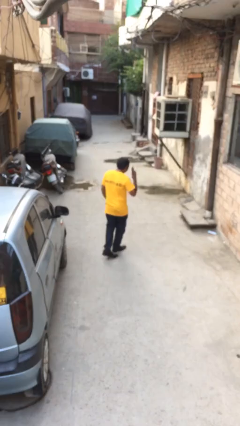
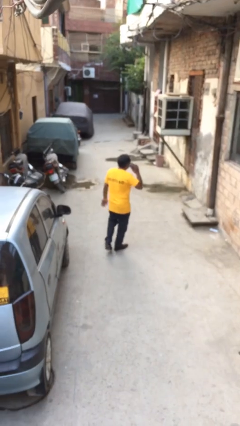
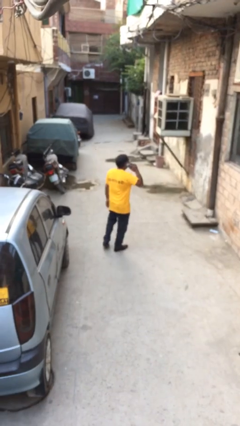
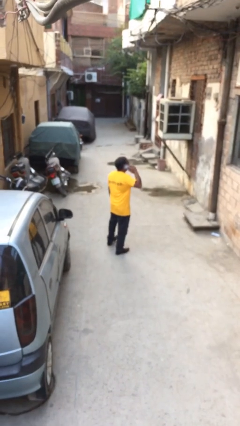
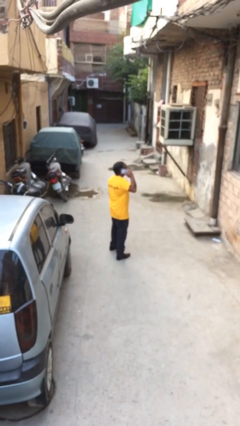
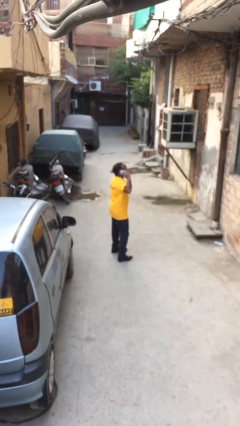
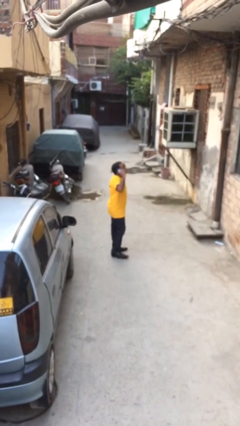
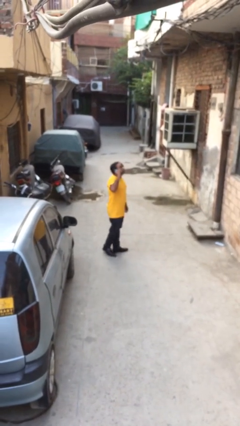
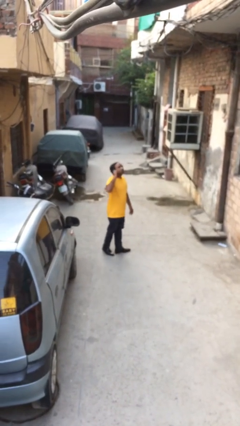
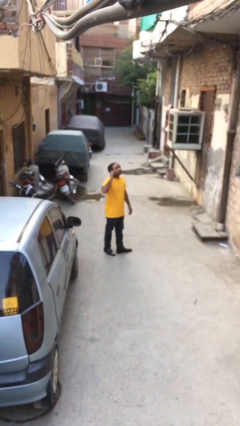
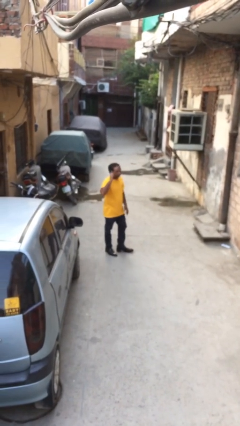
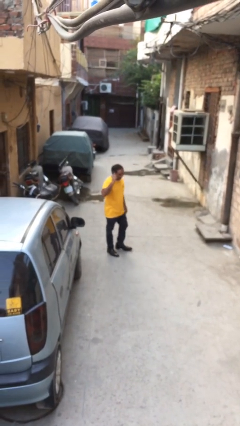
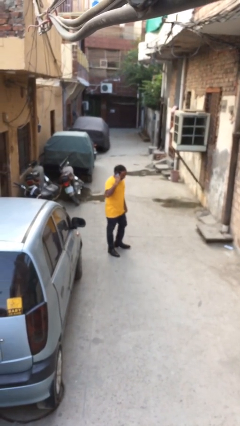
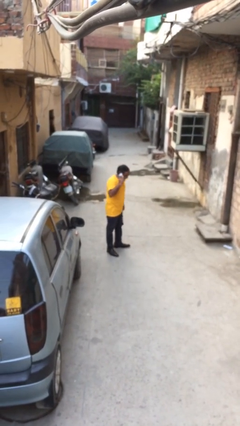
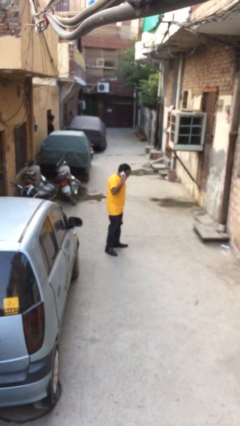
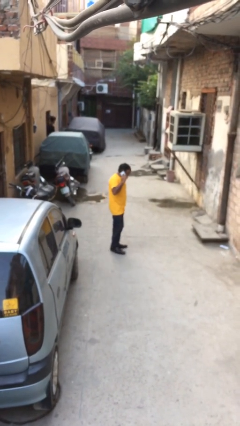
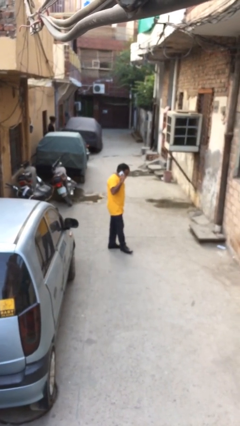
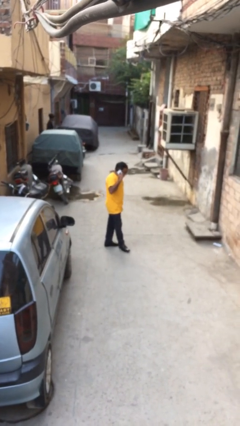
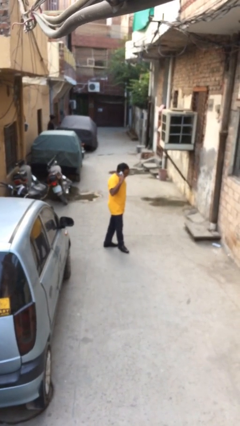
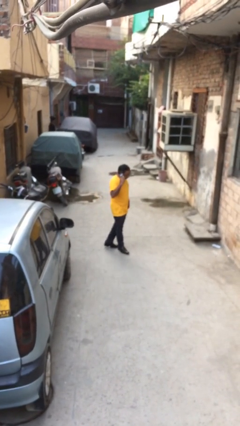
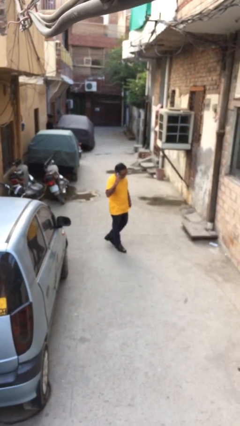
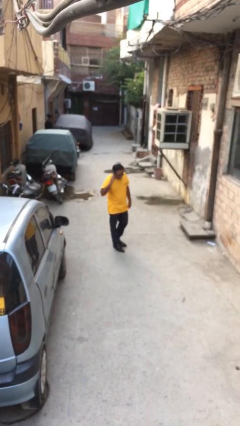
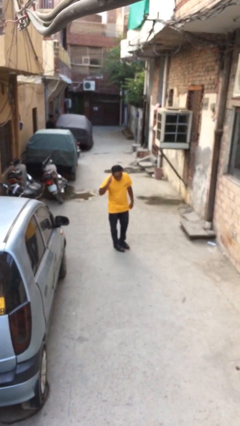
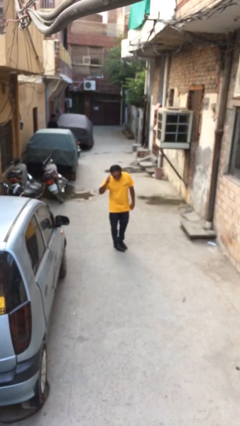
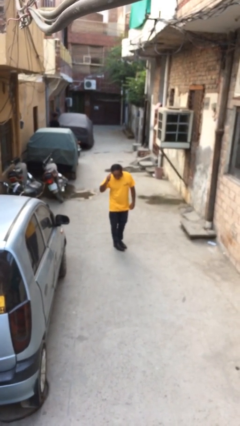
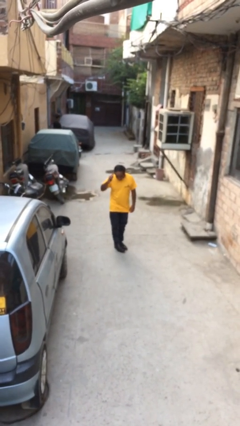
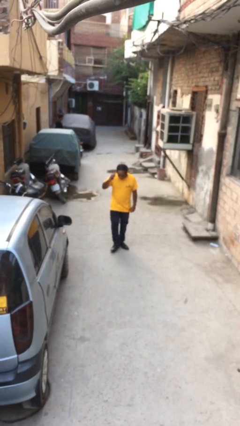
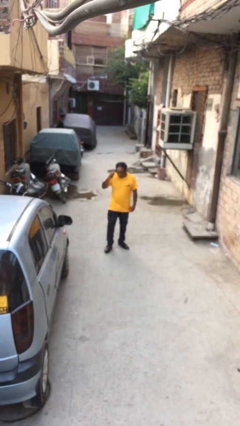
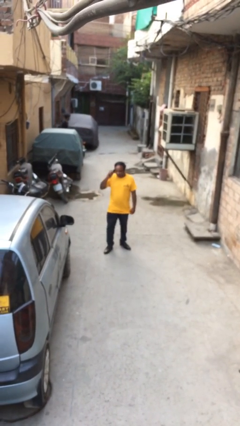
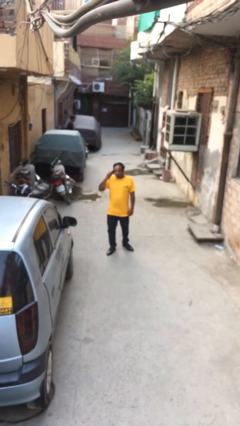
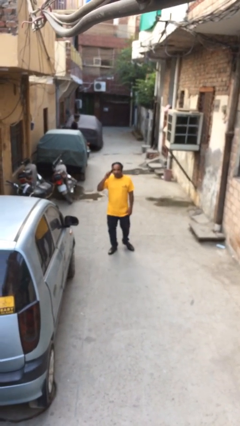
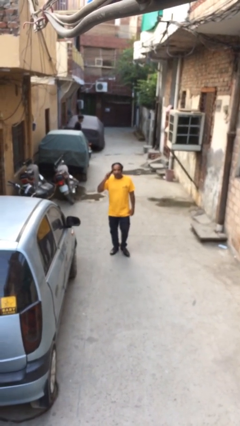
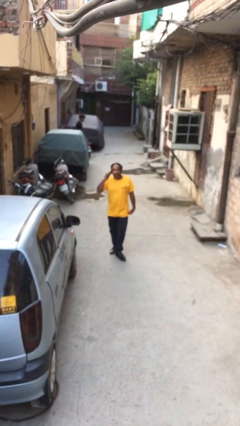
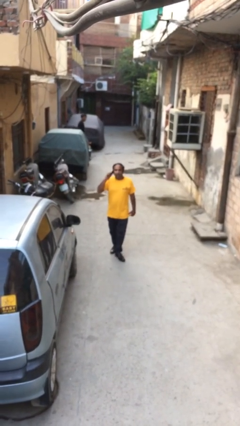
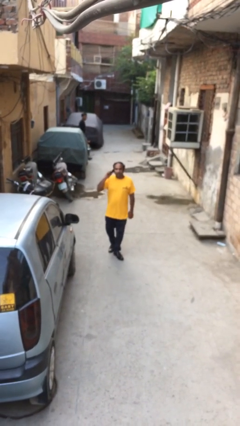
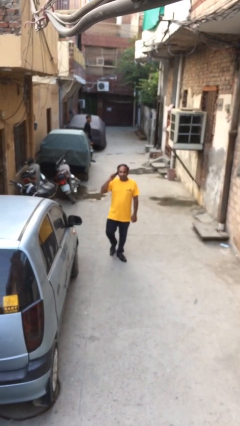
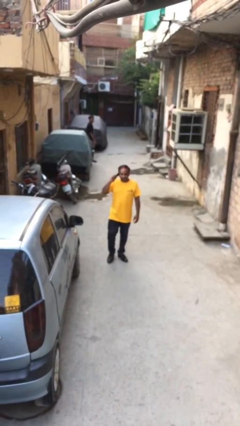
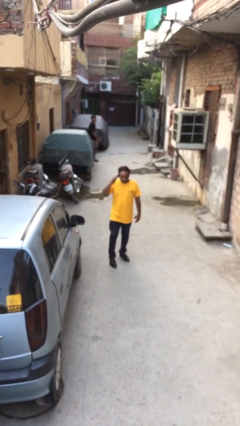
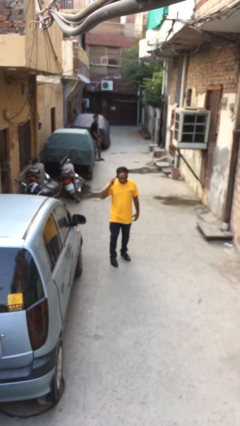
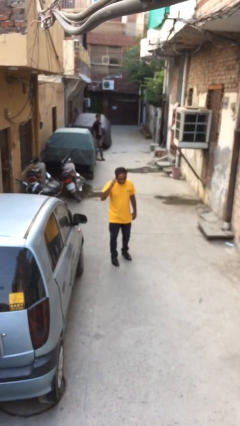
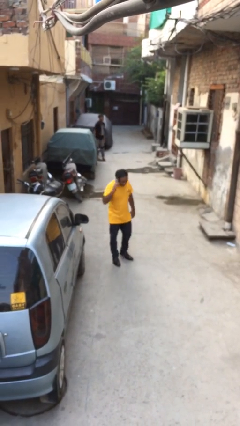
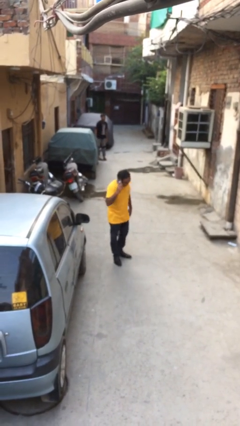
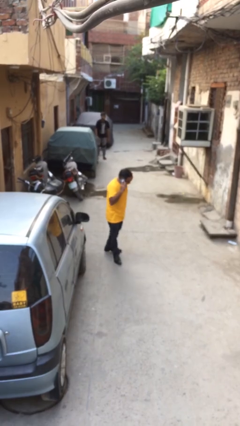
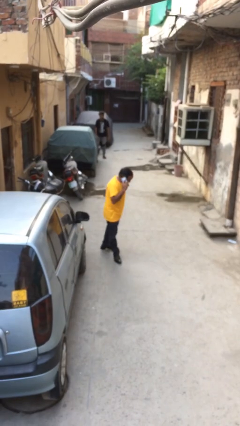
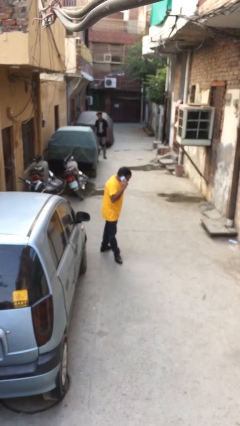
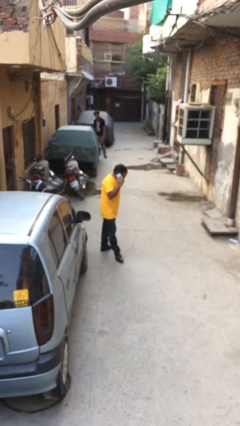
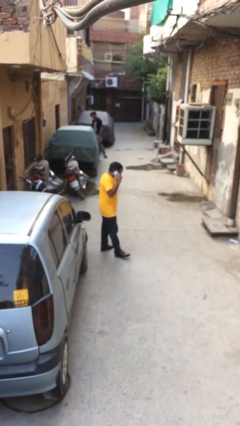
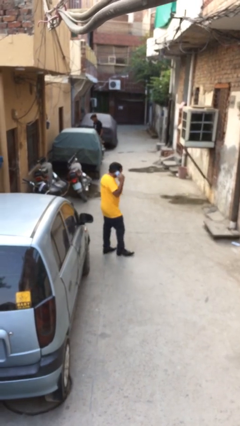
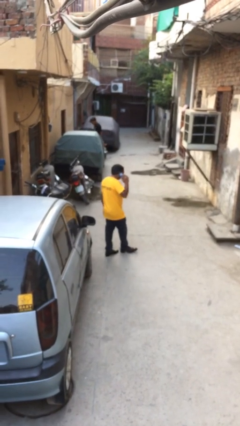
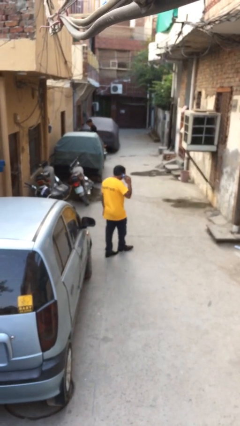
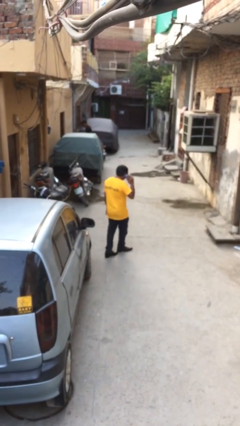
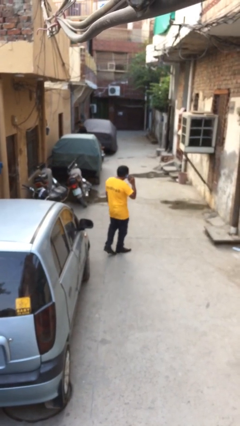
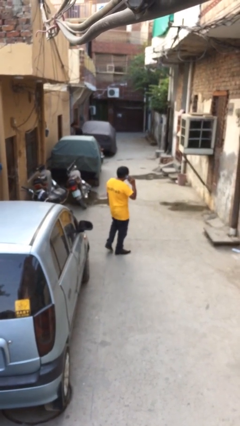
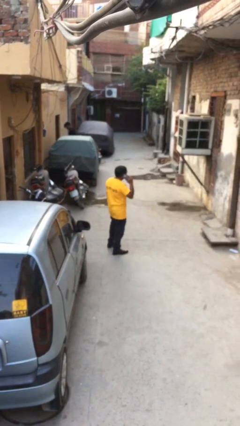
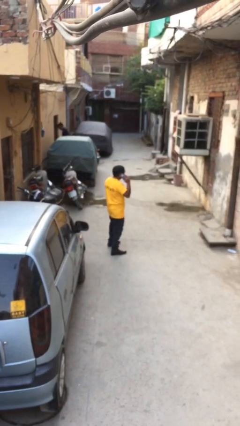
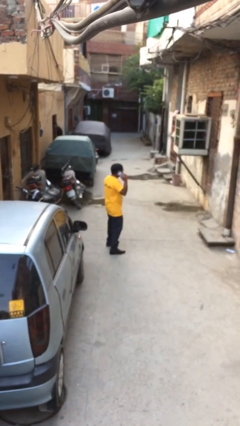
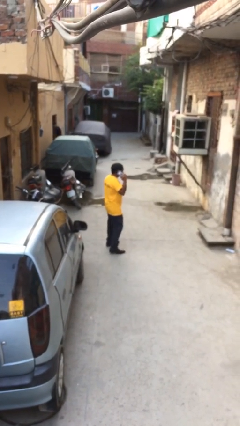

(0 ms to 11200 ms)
person talks on phone

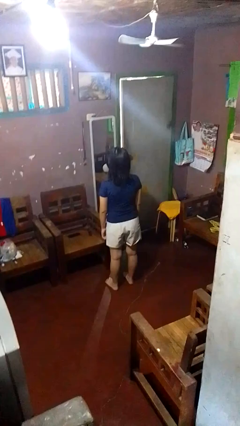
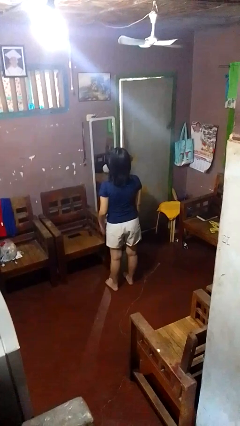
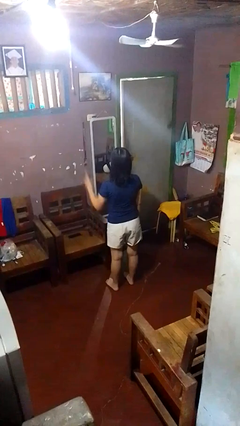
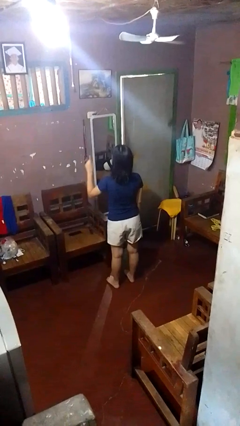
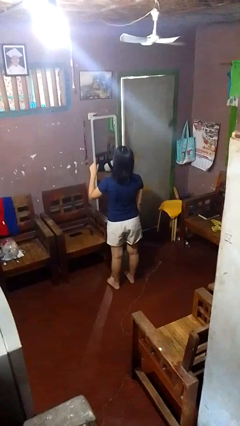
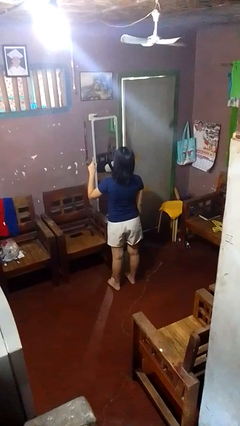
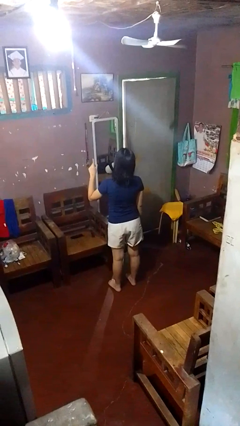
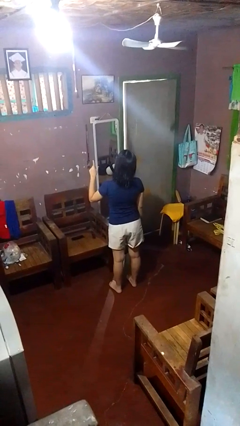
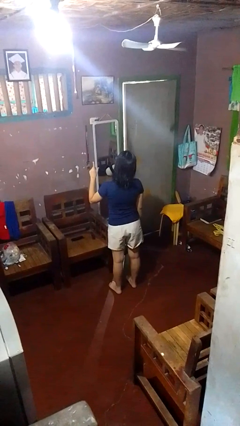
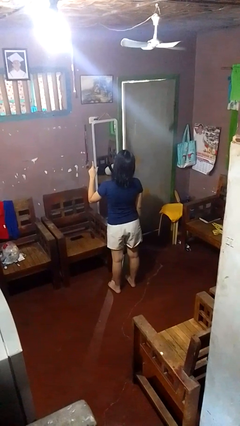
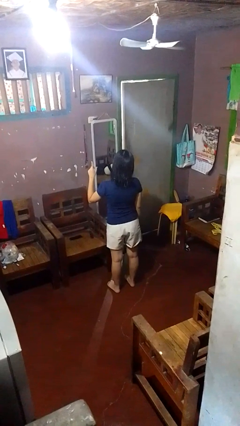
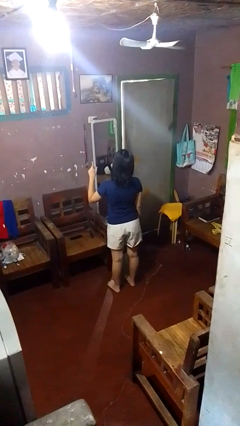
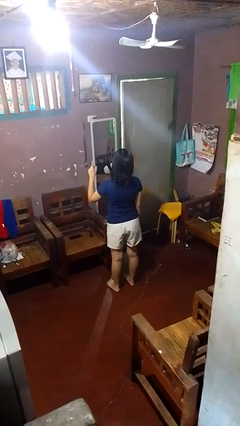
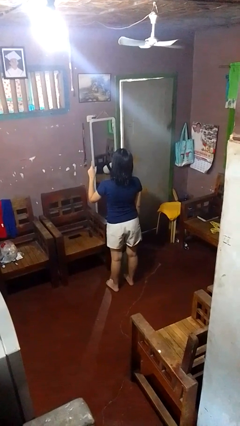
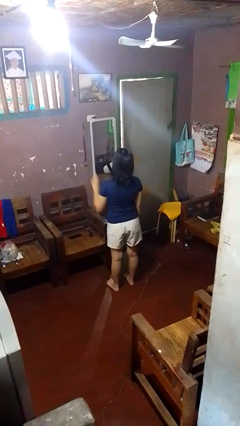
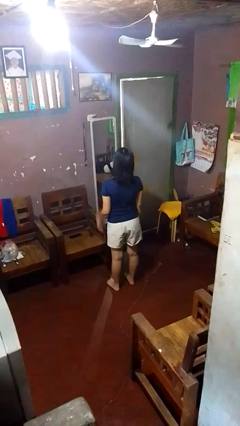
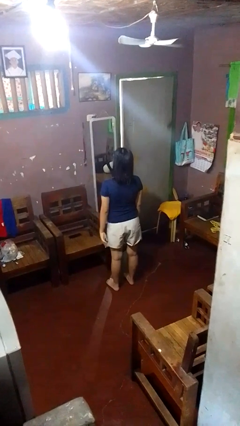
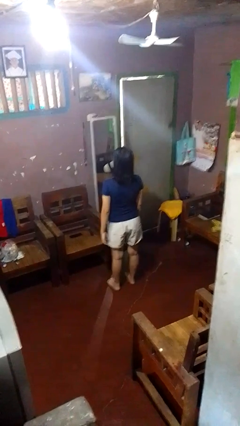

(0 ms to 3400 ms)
person gestures number one

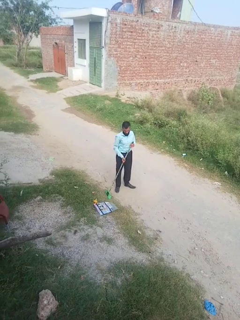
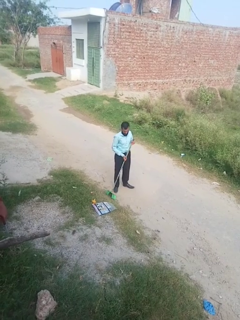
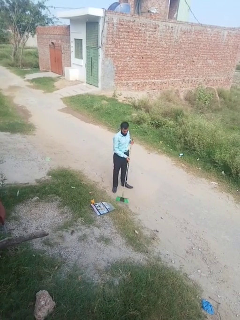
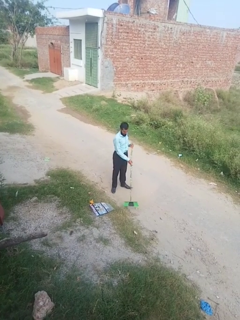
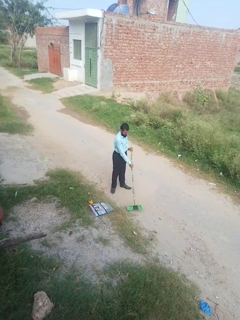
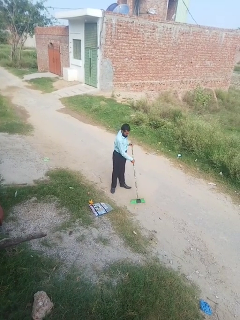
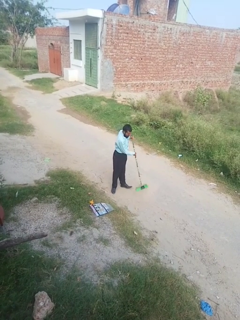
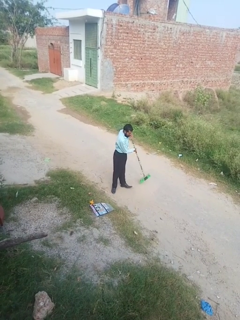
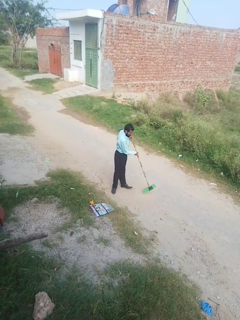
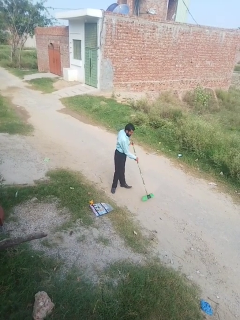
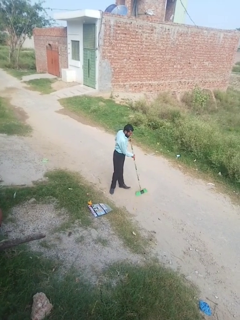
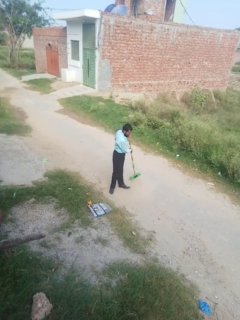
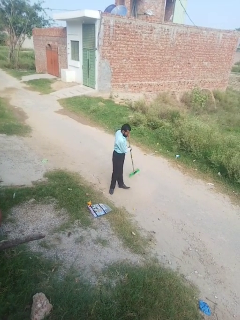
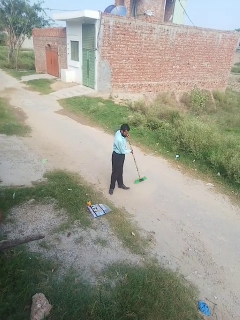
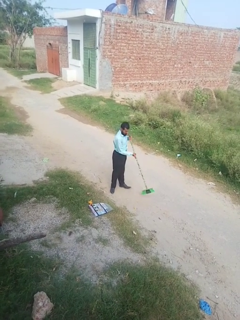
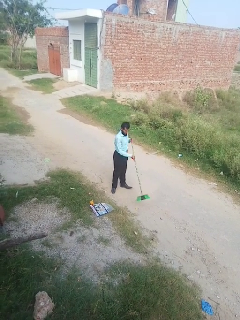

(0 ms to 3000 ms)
person sweeps floor

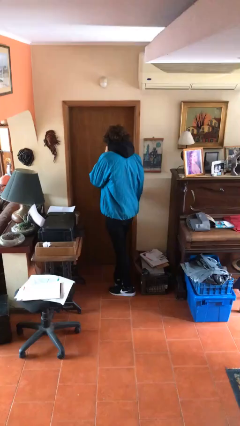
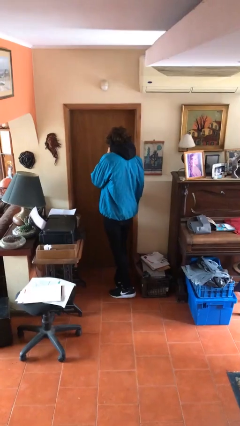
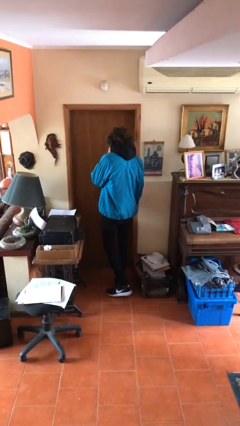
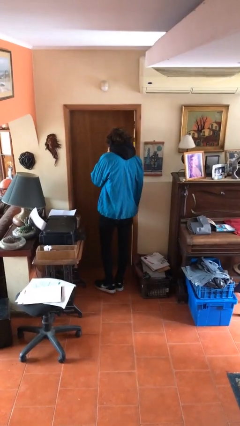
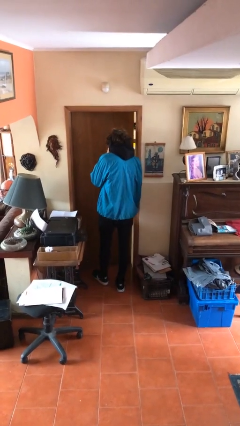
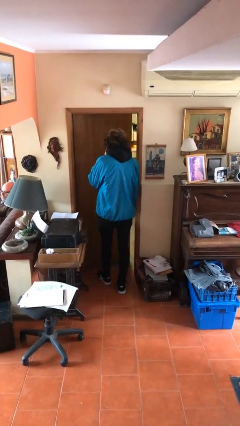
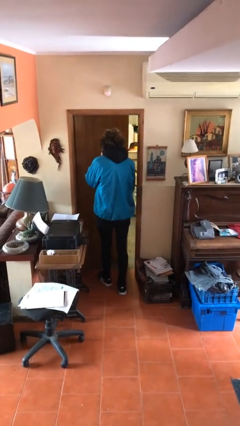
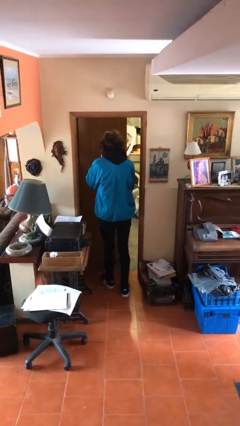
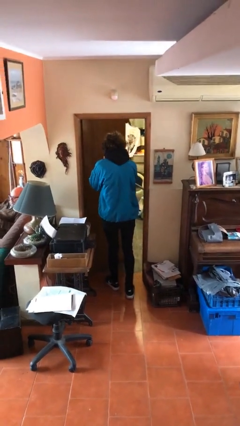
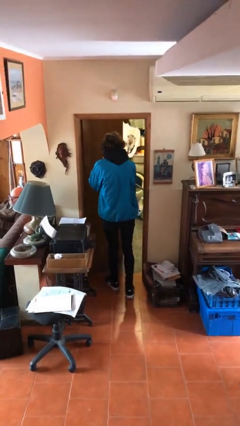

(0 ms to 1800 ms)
person opens facility door
